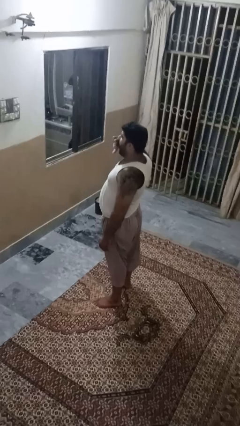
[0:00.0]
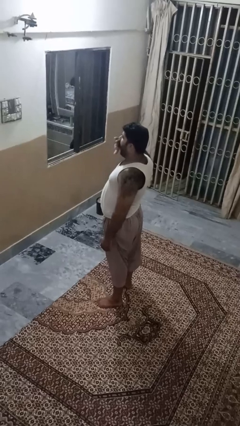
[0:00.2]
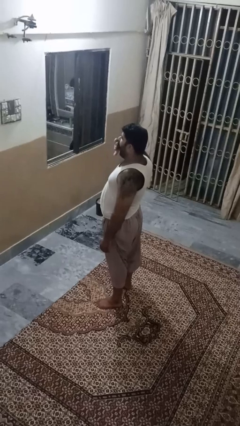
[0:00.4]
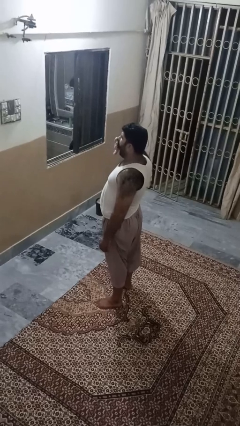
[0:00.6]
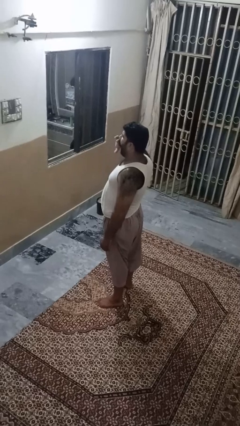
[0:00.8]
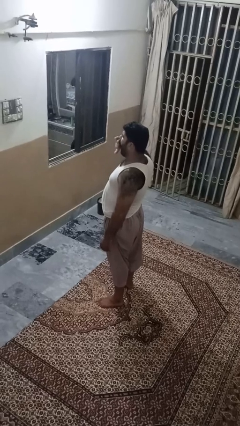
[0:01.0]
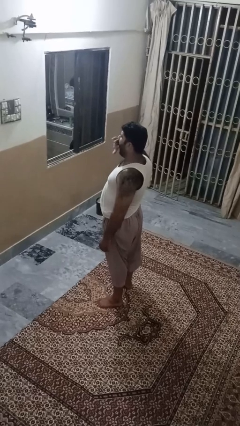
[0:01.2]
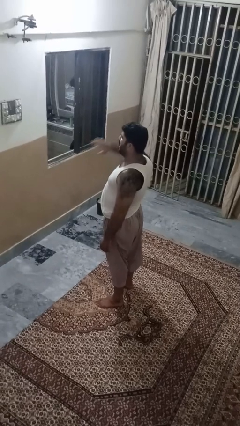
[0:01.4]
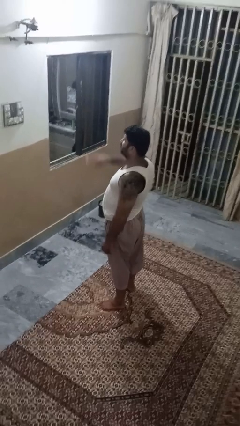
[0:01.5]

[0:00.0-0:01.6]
person yawns

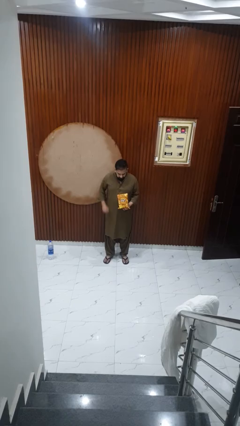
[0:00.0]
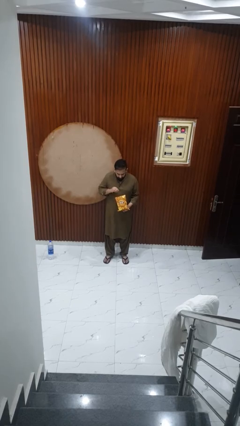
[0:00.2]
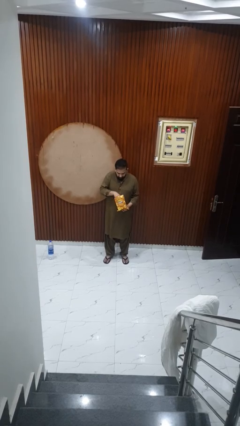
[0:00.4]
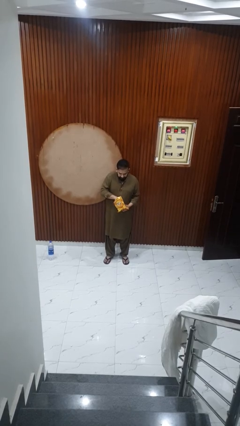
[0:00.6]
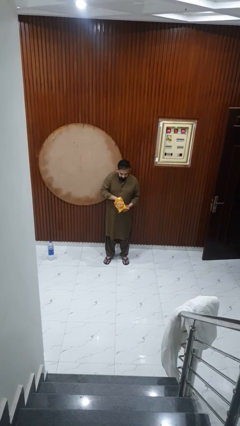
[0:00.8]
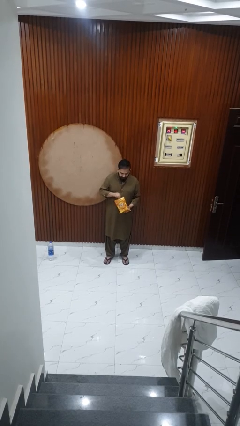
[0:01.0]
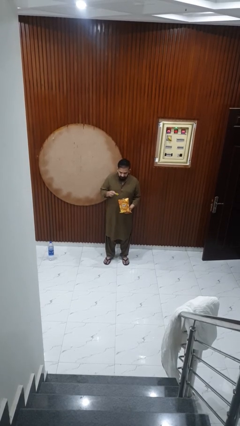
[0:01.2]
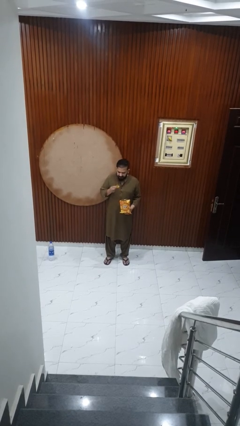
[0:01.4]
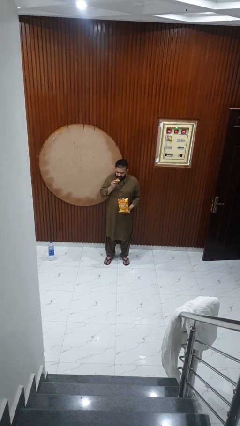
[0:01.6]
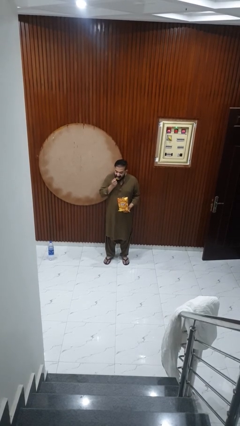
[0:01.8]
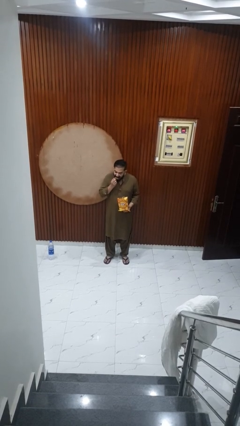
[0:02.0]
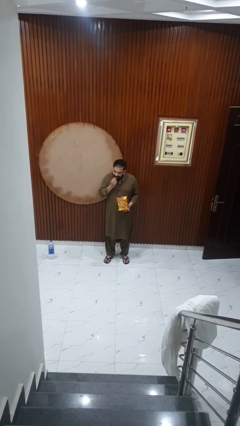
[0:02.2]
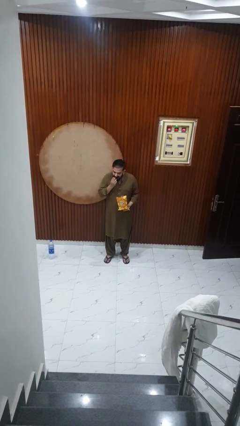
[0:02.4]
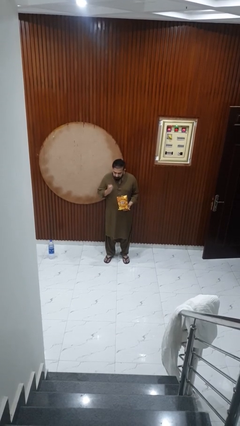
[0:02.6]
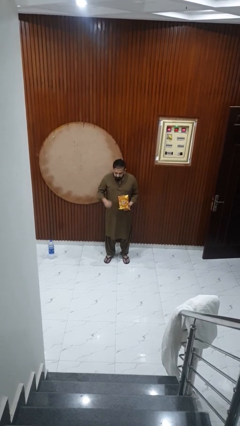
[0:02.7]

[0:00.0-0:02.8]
person eats snack from bag

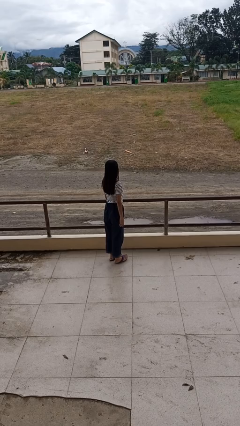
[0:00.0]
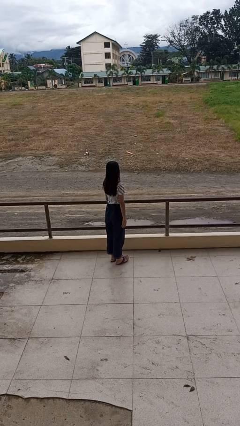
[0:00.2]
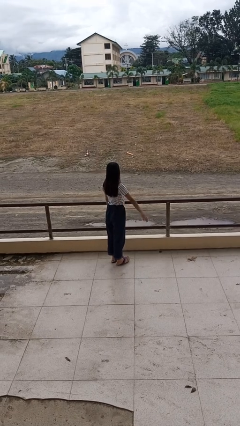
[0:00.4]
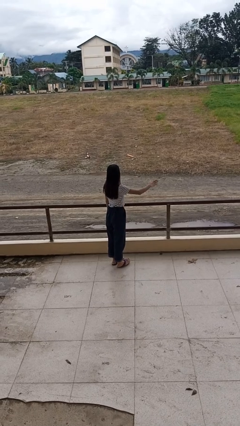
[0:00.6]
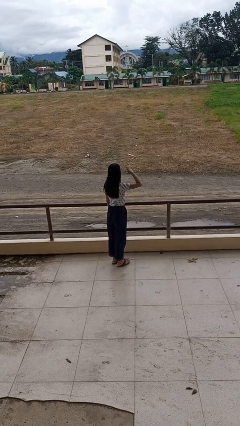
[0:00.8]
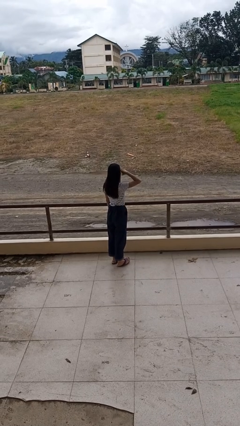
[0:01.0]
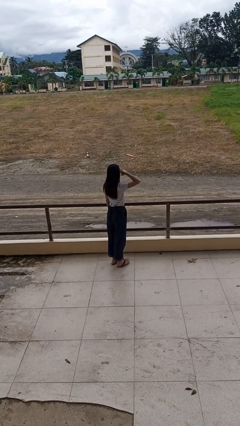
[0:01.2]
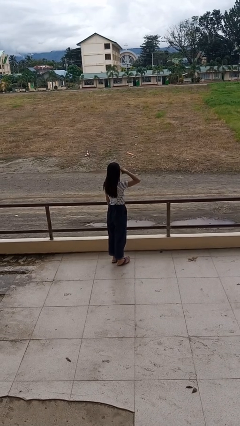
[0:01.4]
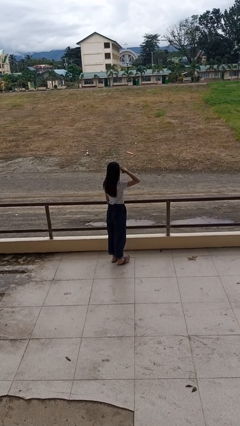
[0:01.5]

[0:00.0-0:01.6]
person salutes

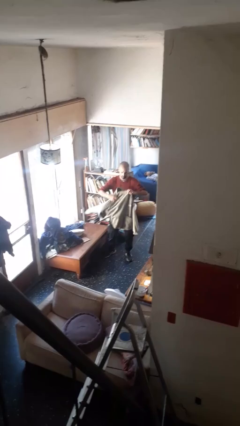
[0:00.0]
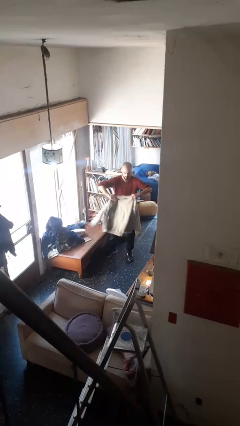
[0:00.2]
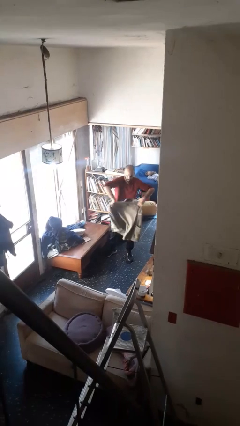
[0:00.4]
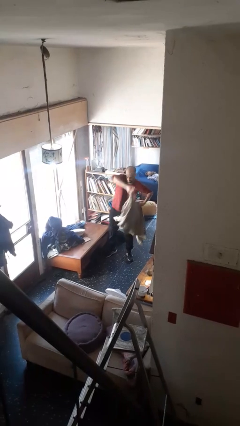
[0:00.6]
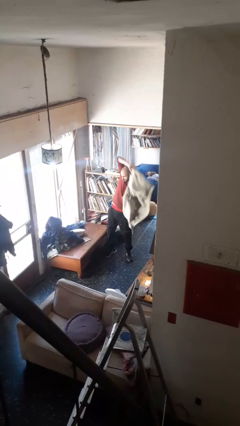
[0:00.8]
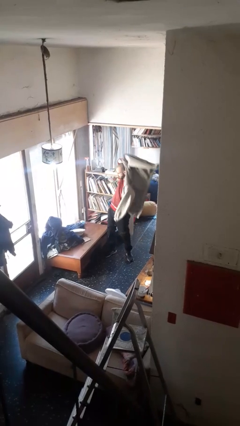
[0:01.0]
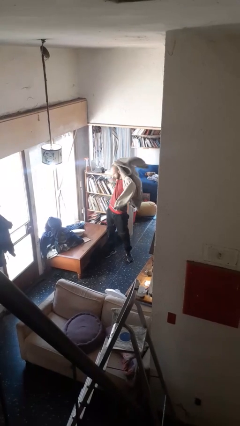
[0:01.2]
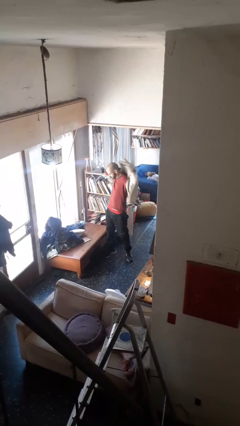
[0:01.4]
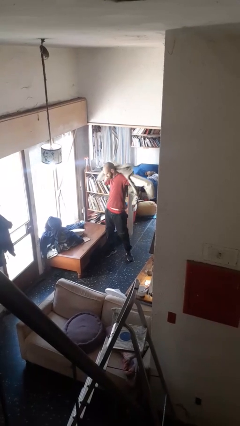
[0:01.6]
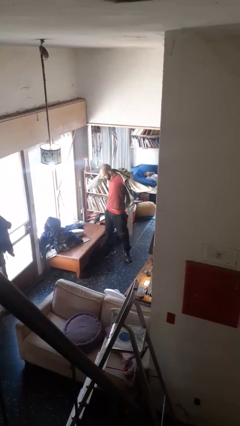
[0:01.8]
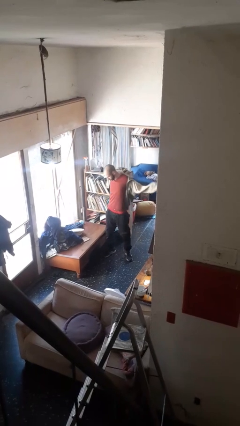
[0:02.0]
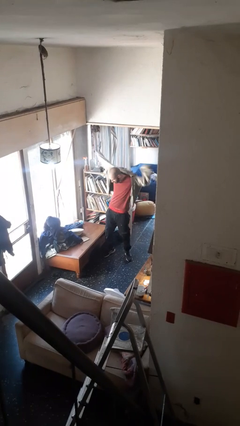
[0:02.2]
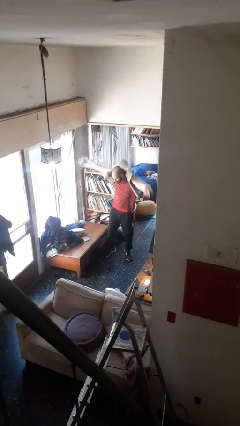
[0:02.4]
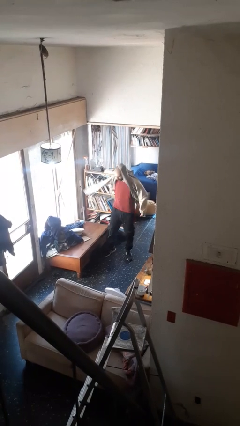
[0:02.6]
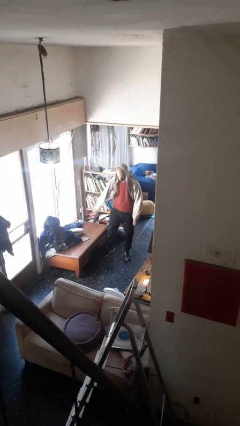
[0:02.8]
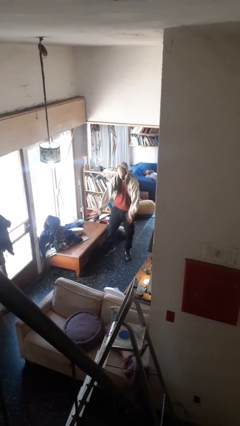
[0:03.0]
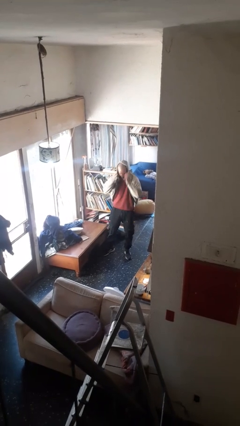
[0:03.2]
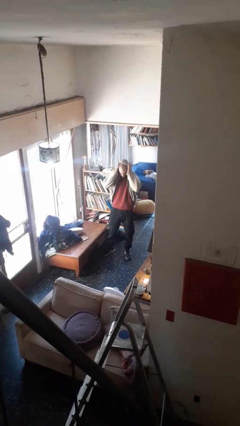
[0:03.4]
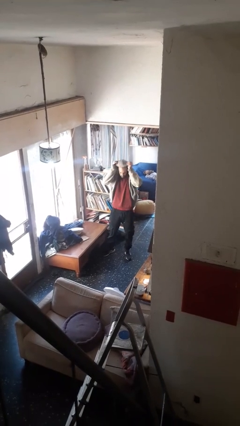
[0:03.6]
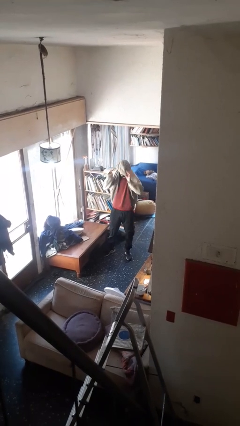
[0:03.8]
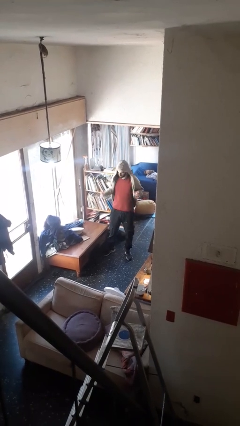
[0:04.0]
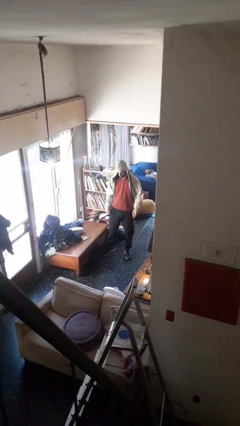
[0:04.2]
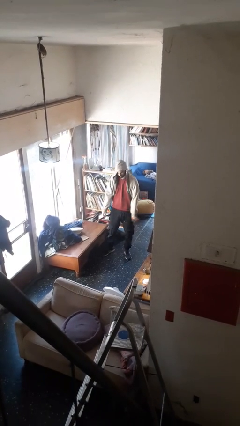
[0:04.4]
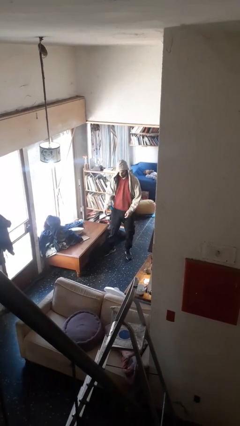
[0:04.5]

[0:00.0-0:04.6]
person puts on hoodie

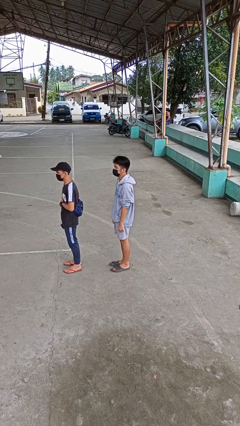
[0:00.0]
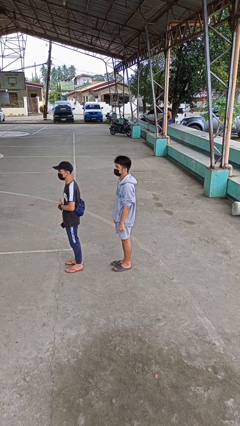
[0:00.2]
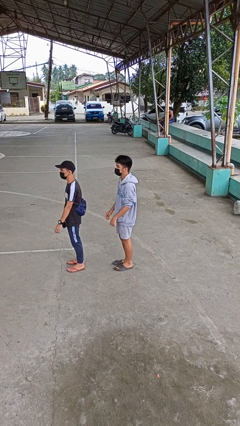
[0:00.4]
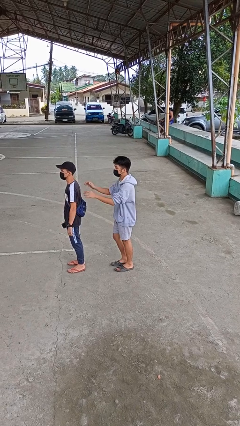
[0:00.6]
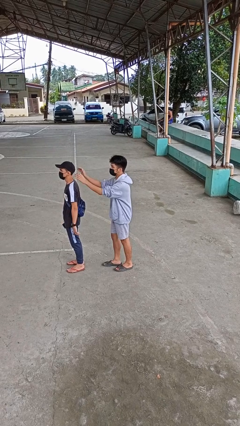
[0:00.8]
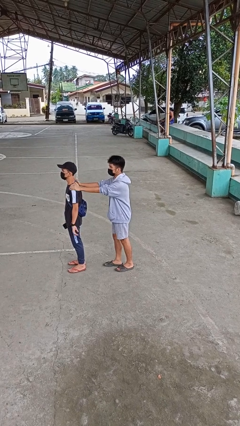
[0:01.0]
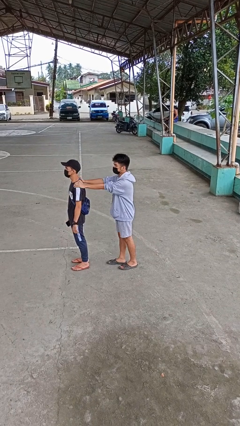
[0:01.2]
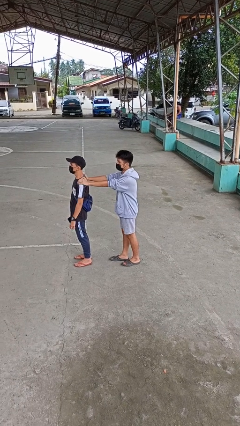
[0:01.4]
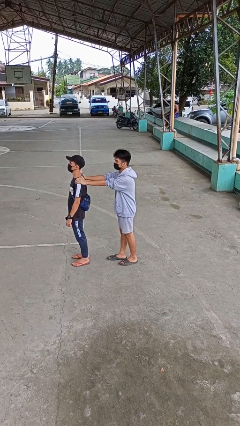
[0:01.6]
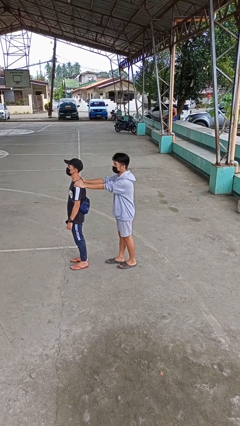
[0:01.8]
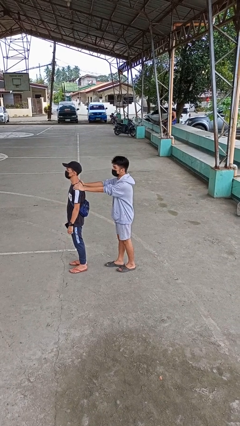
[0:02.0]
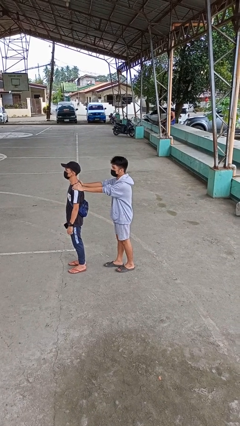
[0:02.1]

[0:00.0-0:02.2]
person grabs person by shoulder

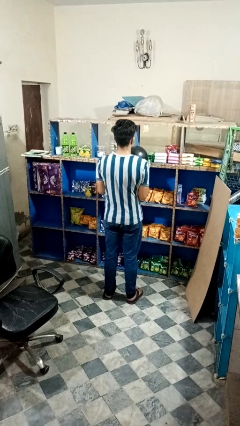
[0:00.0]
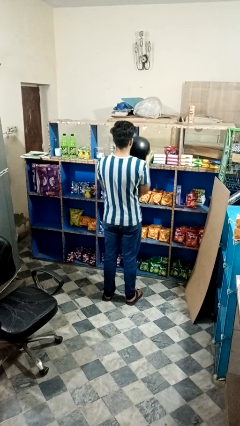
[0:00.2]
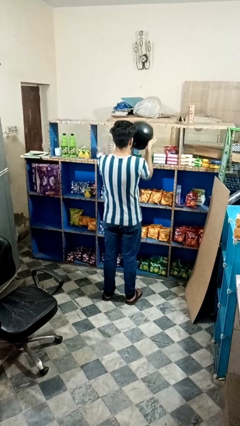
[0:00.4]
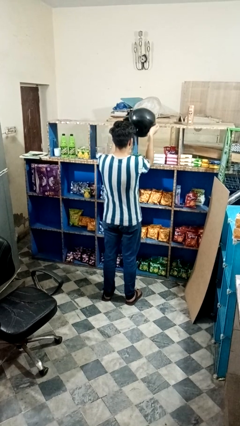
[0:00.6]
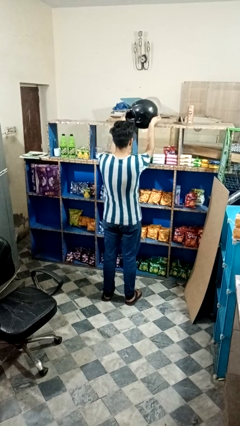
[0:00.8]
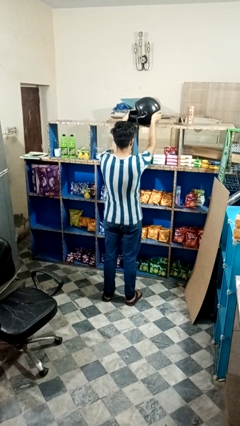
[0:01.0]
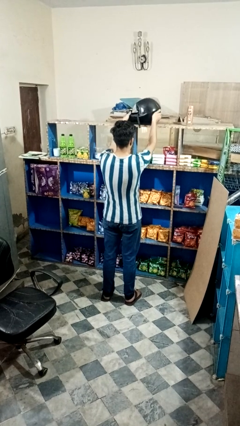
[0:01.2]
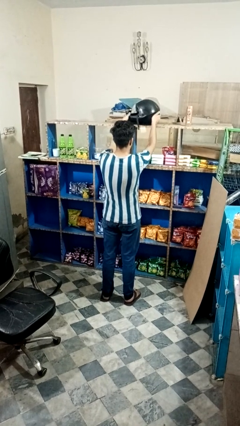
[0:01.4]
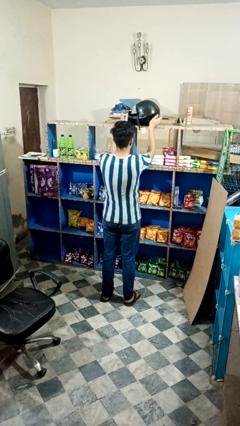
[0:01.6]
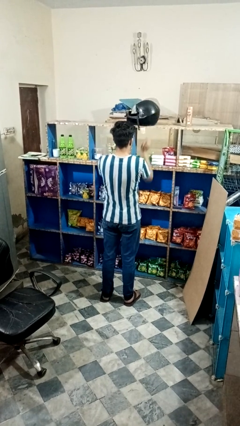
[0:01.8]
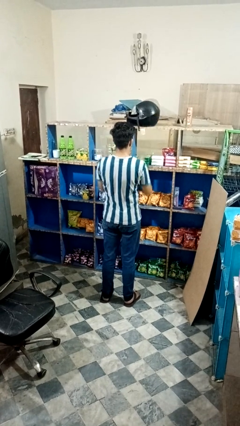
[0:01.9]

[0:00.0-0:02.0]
person puts down object on countertop

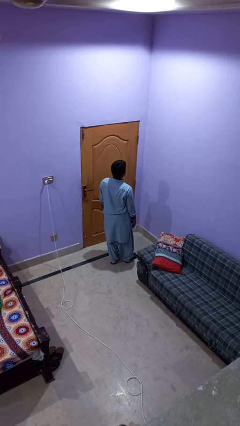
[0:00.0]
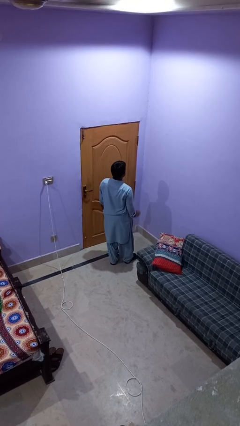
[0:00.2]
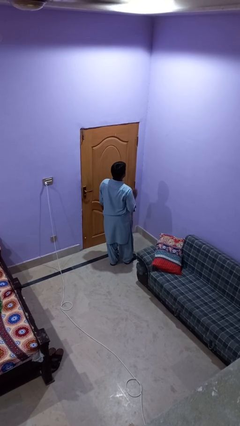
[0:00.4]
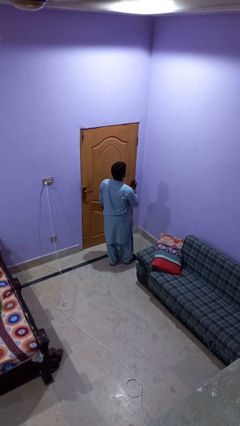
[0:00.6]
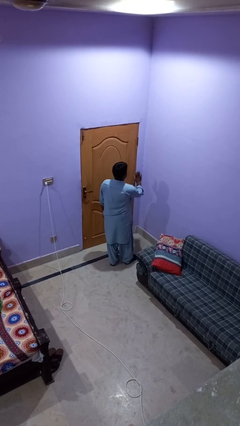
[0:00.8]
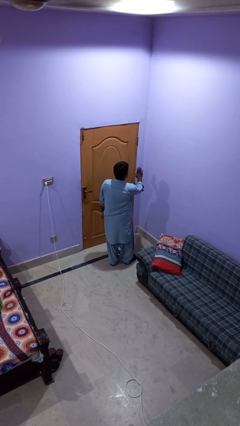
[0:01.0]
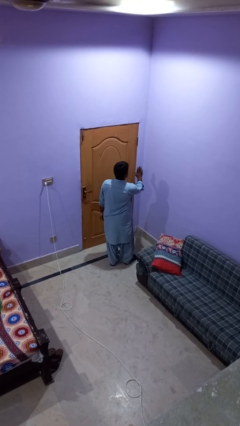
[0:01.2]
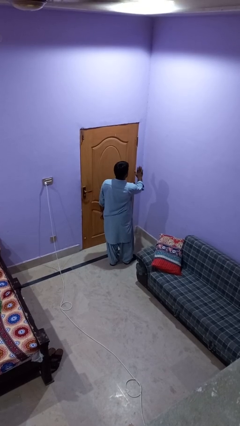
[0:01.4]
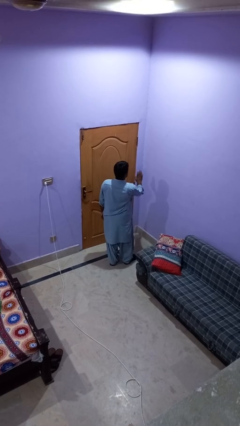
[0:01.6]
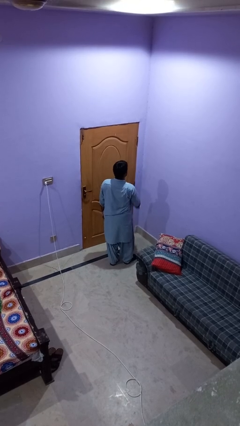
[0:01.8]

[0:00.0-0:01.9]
person gestures stop

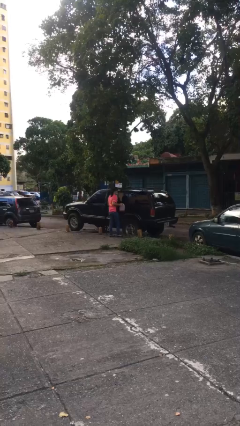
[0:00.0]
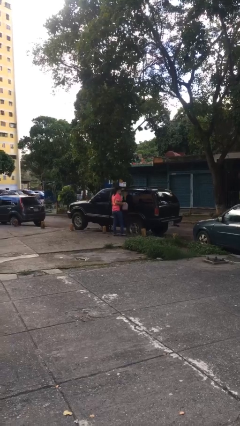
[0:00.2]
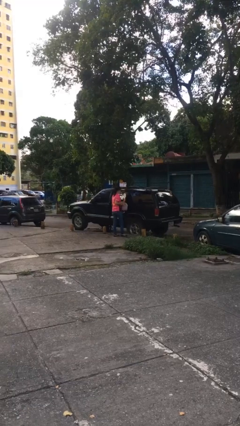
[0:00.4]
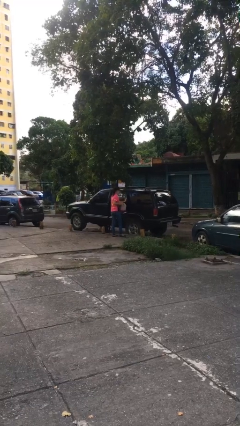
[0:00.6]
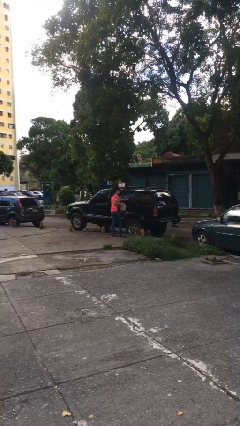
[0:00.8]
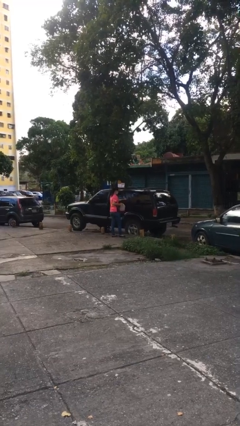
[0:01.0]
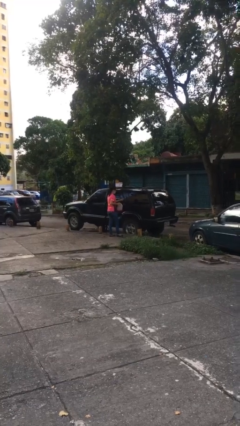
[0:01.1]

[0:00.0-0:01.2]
person closes car door
